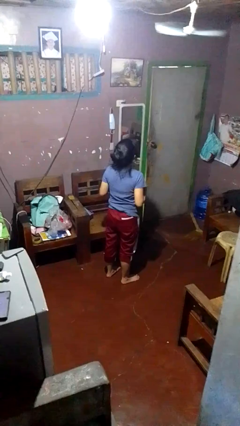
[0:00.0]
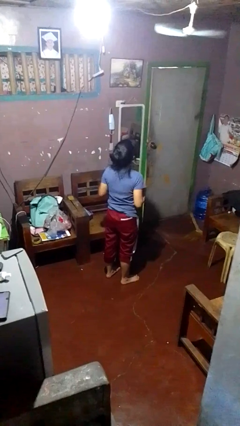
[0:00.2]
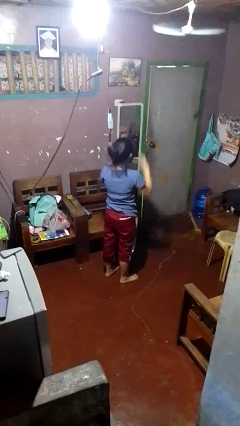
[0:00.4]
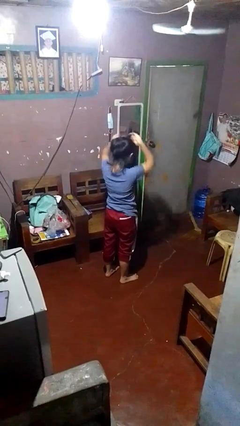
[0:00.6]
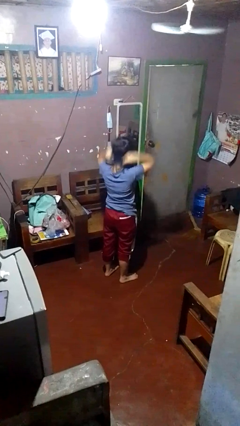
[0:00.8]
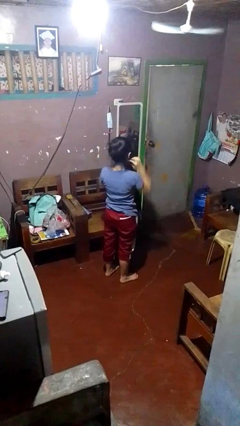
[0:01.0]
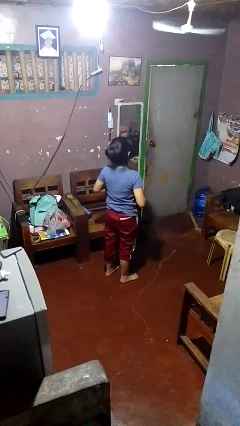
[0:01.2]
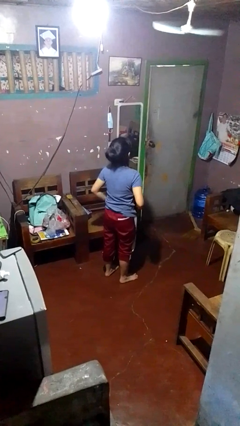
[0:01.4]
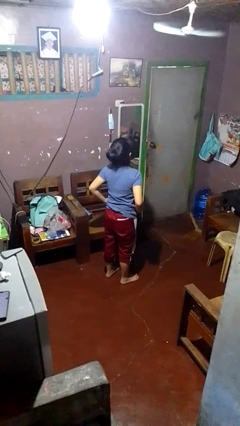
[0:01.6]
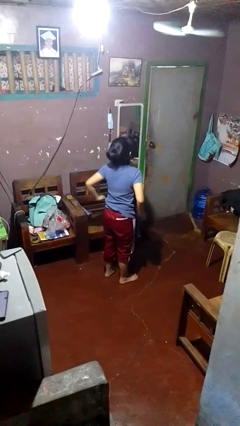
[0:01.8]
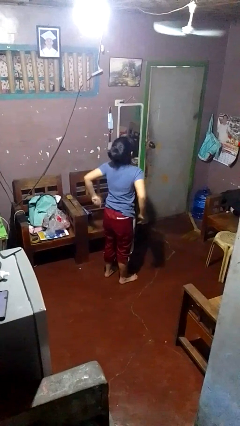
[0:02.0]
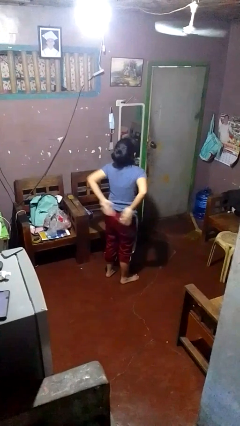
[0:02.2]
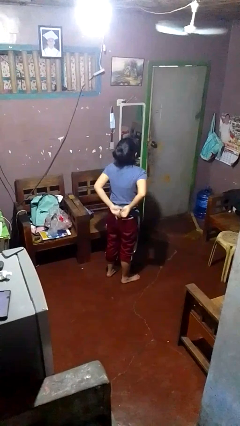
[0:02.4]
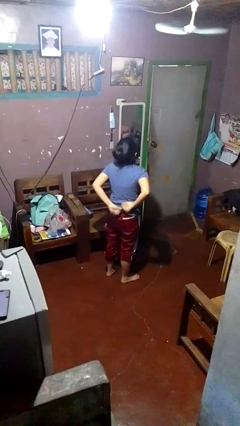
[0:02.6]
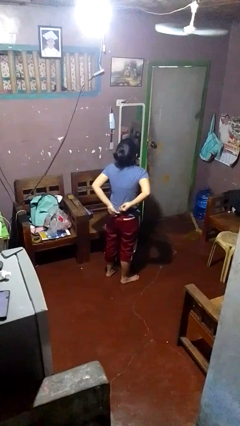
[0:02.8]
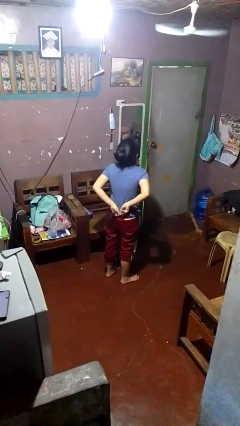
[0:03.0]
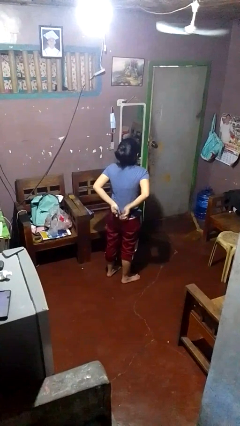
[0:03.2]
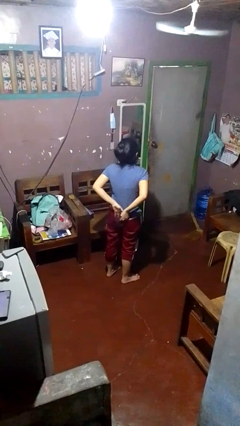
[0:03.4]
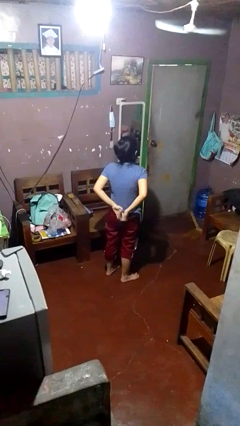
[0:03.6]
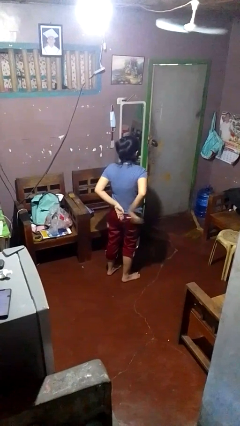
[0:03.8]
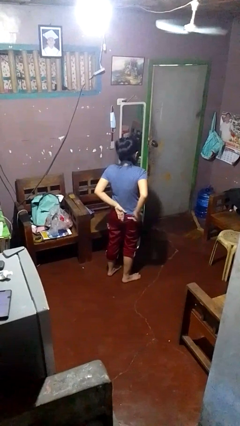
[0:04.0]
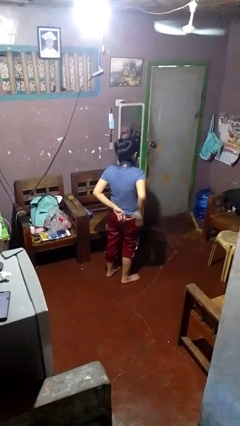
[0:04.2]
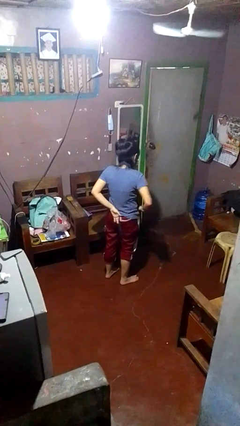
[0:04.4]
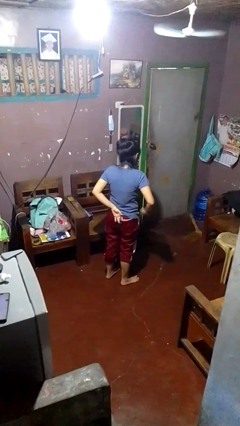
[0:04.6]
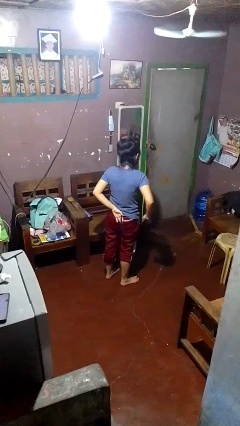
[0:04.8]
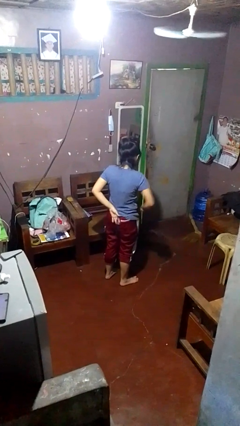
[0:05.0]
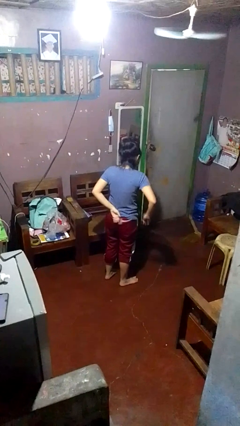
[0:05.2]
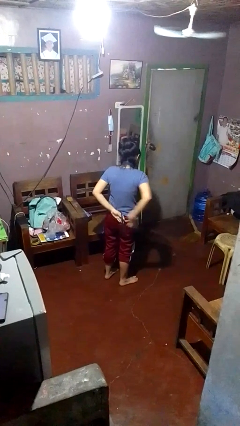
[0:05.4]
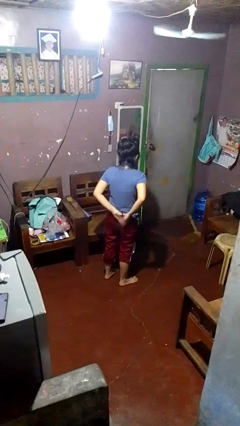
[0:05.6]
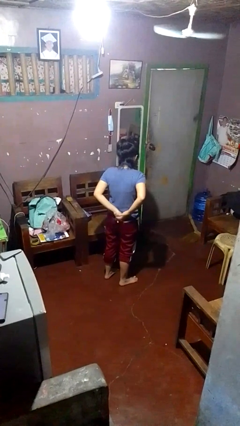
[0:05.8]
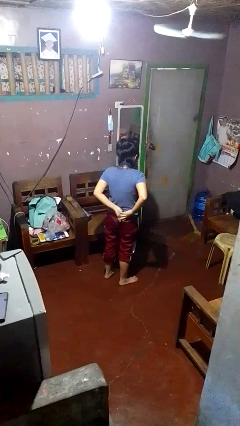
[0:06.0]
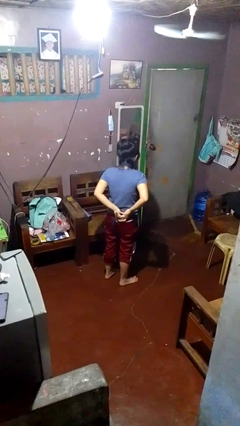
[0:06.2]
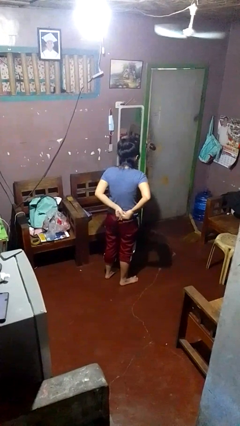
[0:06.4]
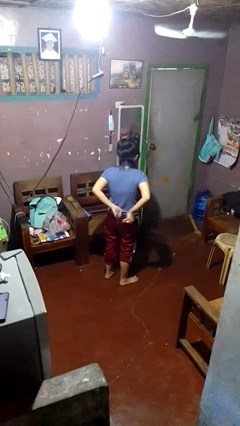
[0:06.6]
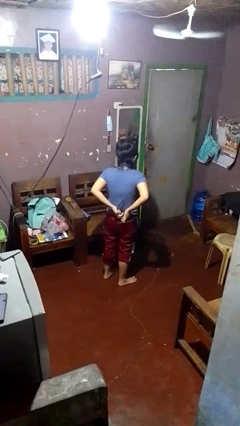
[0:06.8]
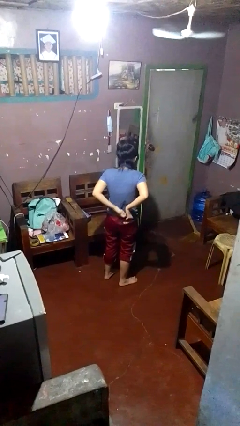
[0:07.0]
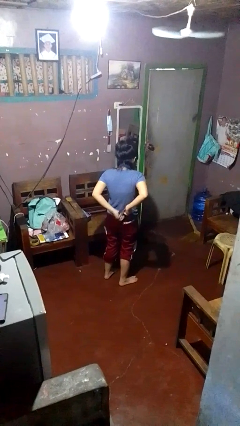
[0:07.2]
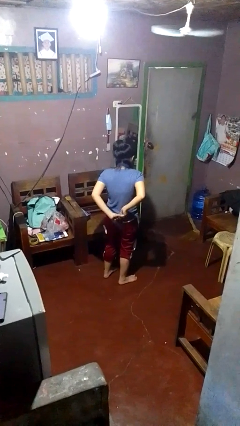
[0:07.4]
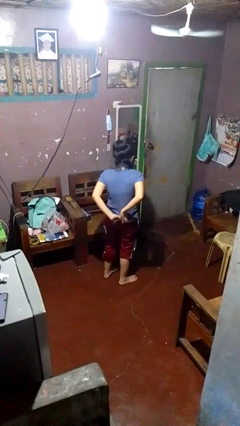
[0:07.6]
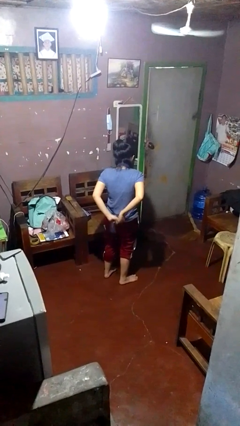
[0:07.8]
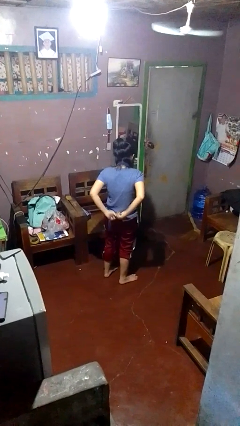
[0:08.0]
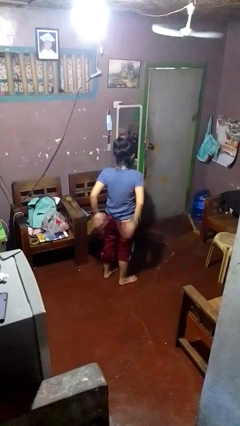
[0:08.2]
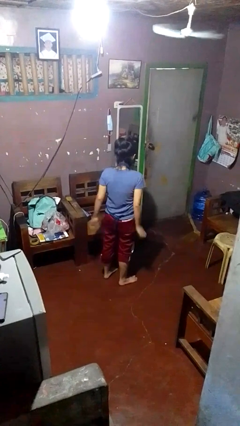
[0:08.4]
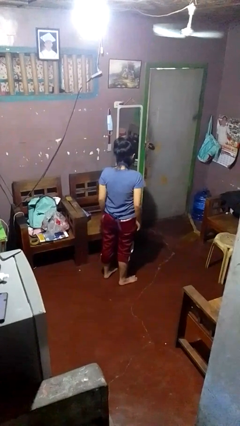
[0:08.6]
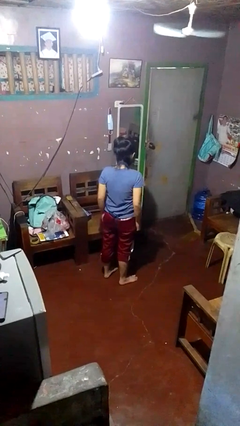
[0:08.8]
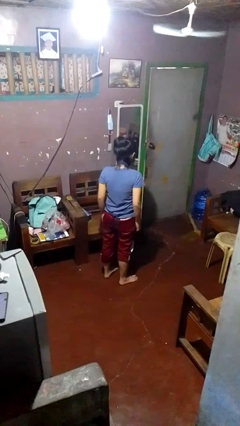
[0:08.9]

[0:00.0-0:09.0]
person puts on apron

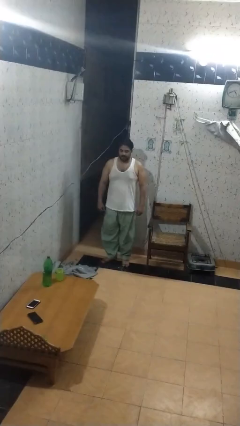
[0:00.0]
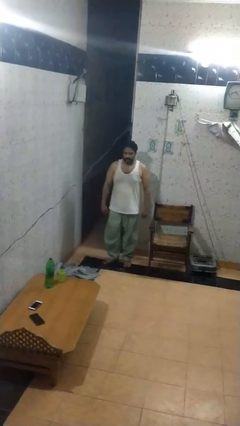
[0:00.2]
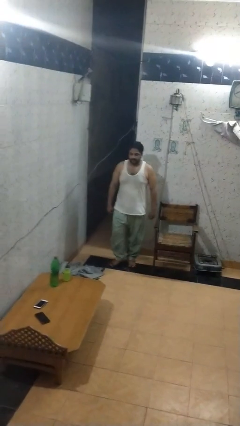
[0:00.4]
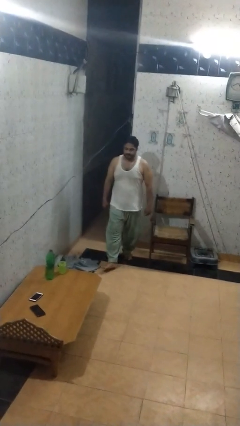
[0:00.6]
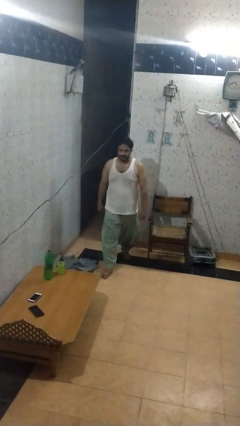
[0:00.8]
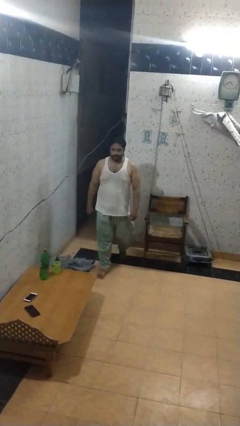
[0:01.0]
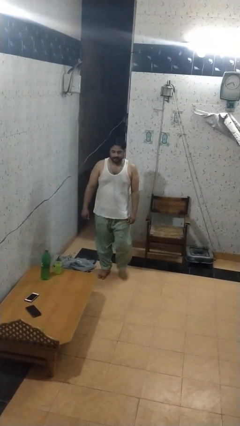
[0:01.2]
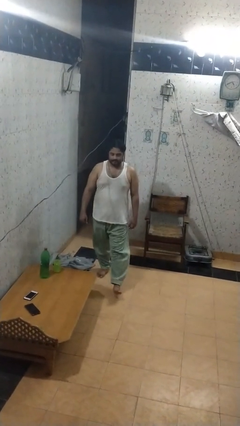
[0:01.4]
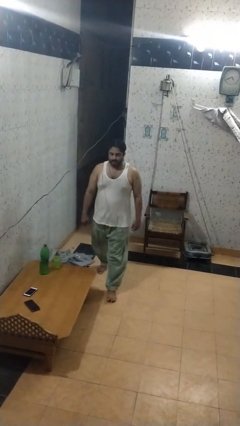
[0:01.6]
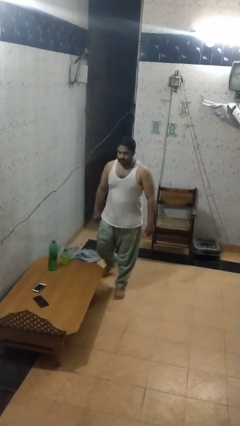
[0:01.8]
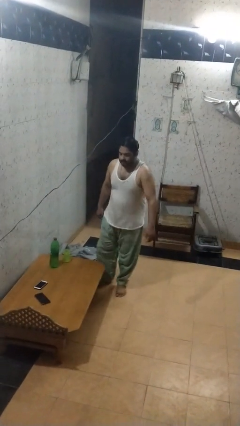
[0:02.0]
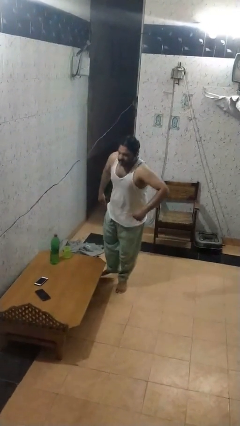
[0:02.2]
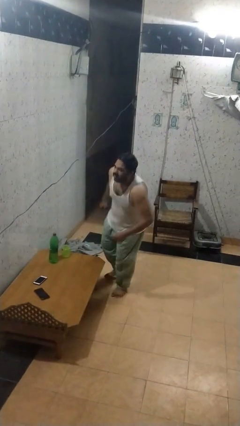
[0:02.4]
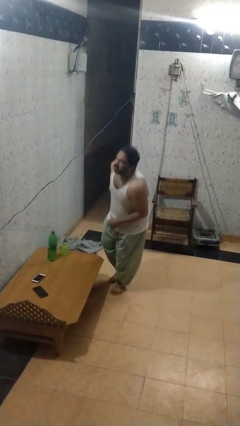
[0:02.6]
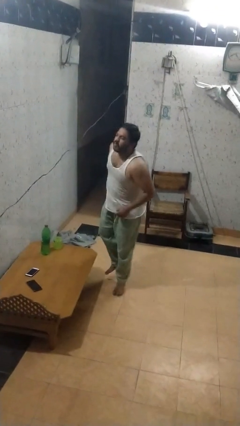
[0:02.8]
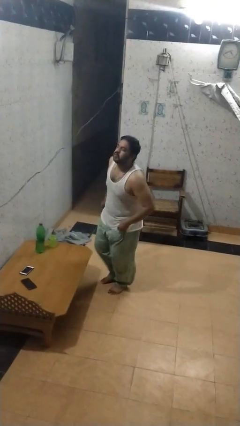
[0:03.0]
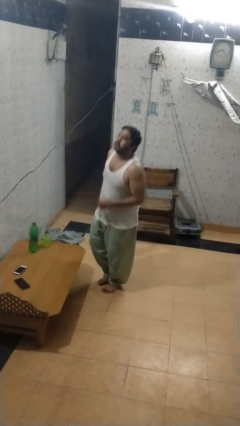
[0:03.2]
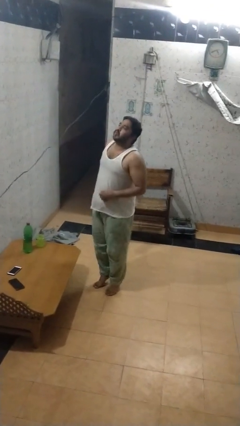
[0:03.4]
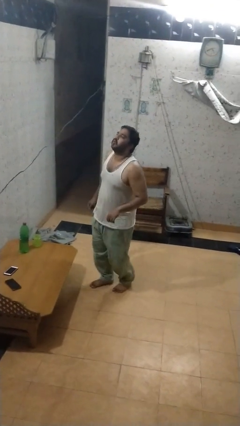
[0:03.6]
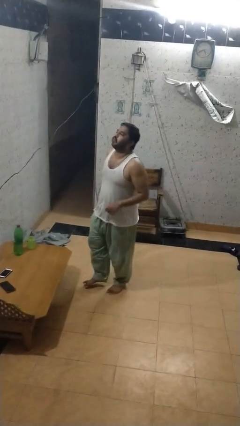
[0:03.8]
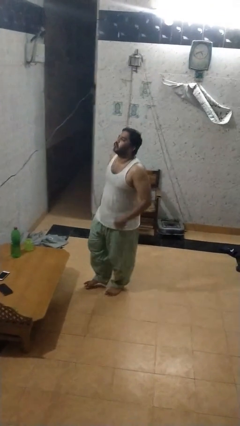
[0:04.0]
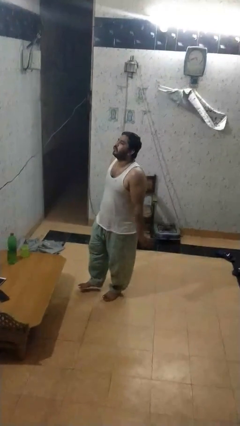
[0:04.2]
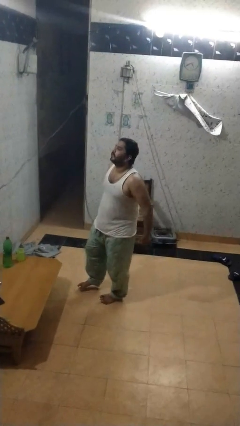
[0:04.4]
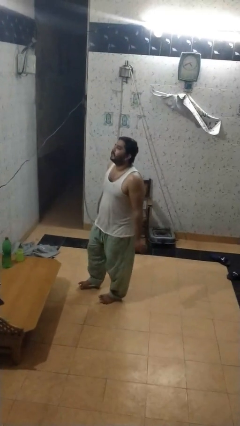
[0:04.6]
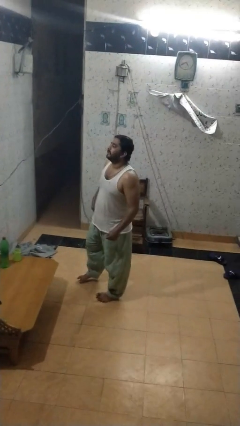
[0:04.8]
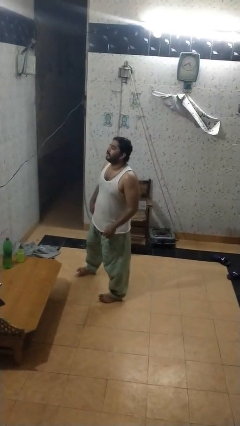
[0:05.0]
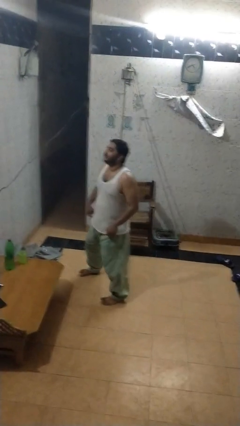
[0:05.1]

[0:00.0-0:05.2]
person bumps into table

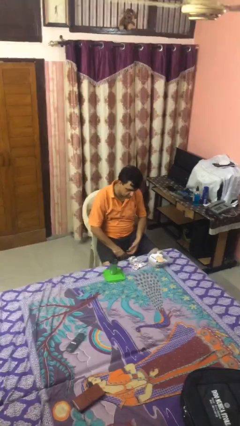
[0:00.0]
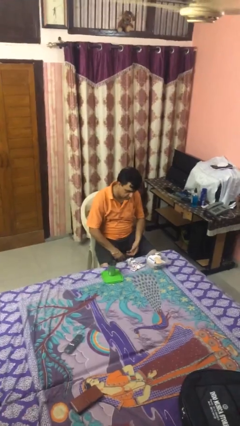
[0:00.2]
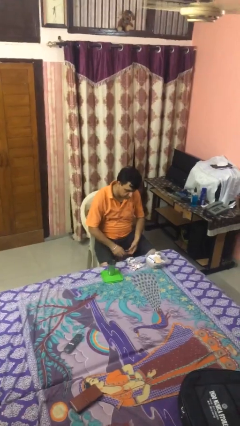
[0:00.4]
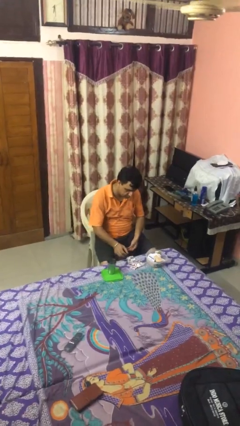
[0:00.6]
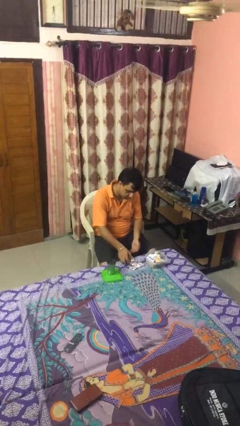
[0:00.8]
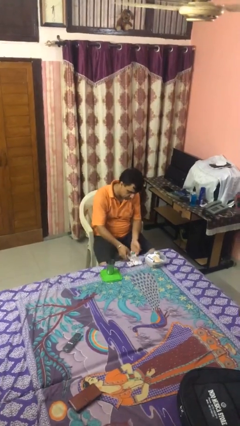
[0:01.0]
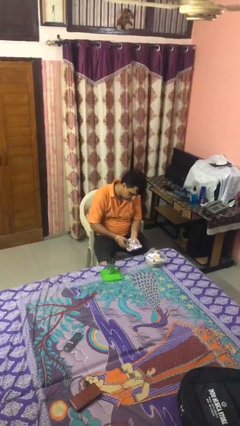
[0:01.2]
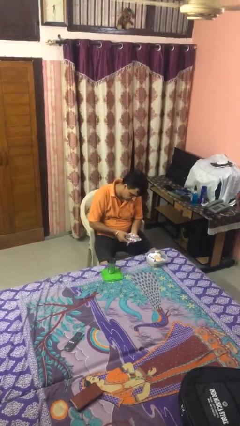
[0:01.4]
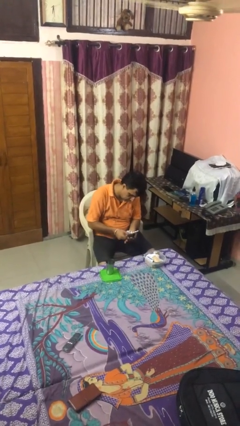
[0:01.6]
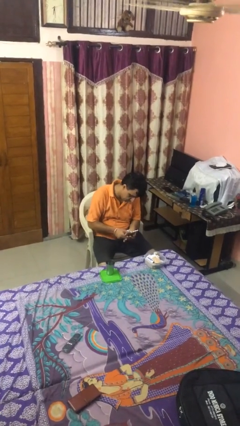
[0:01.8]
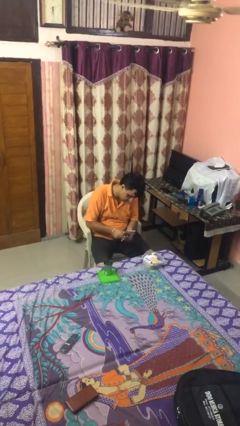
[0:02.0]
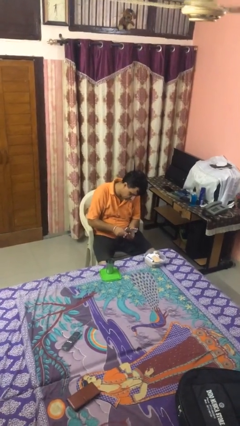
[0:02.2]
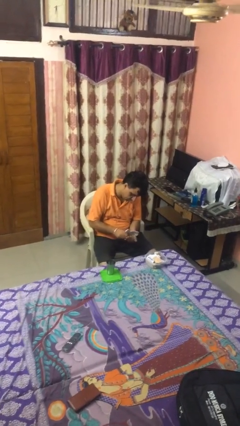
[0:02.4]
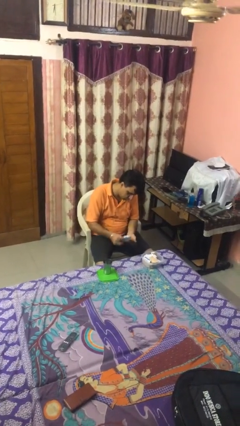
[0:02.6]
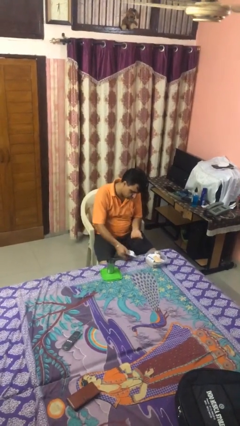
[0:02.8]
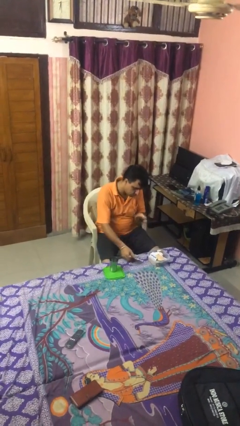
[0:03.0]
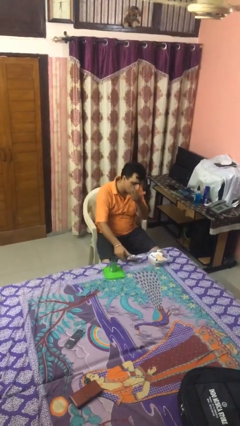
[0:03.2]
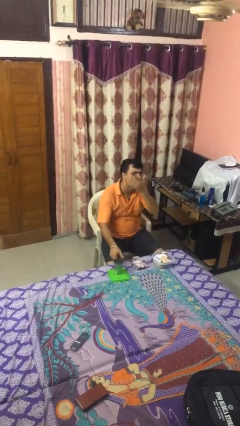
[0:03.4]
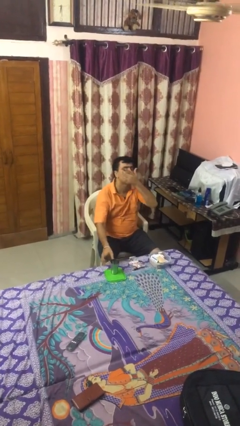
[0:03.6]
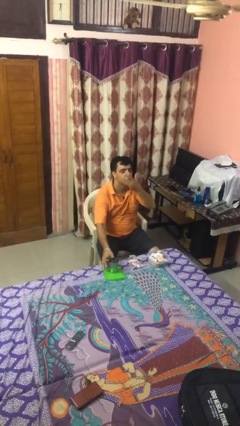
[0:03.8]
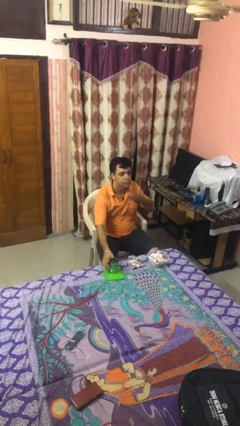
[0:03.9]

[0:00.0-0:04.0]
person takes medicine pills
